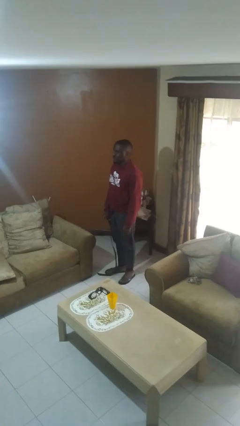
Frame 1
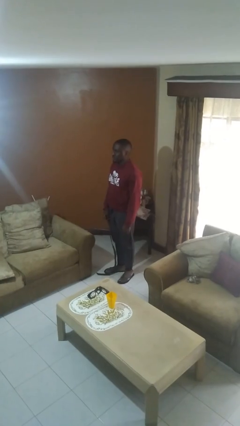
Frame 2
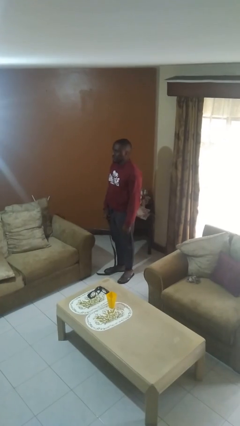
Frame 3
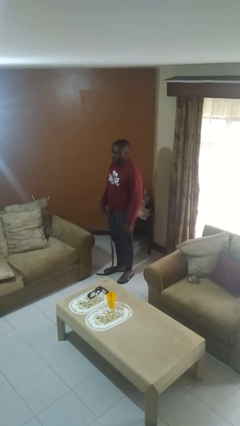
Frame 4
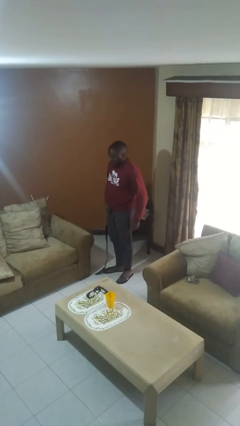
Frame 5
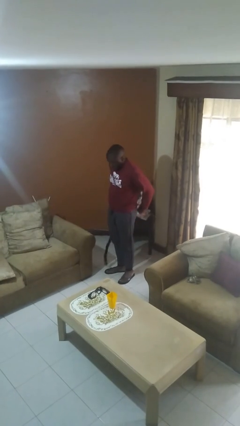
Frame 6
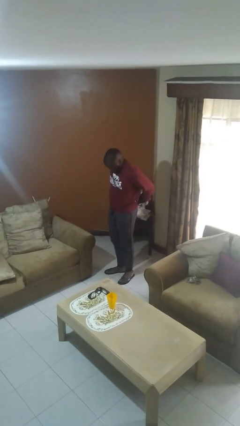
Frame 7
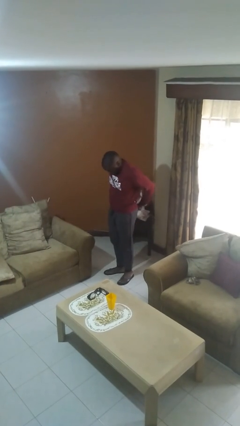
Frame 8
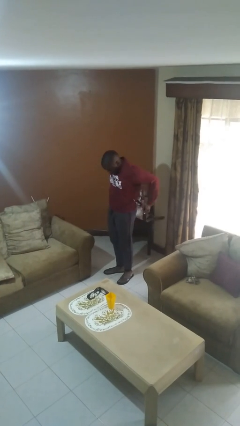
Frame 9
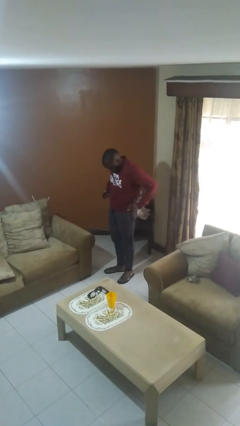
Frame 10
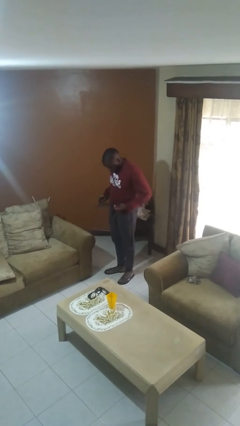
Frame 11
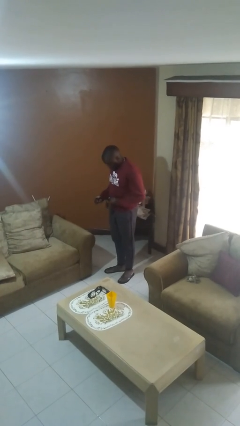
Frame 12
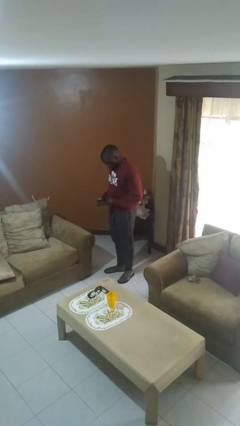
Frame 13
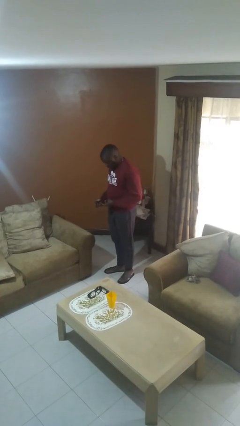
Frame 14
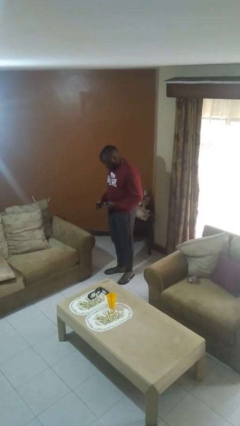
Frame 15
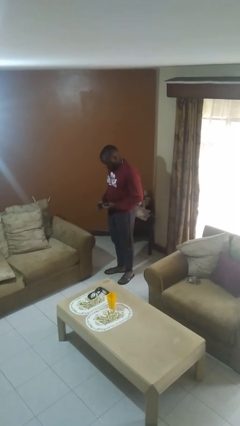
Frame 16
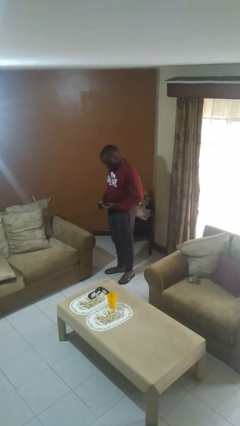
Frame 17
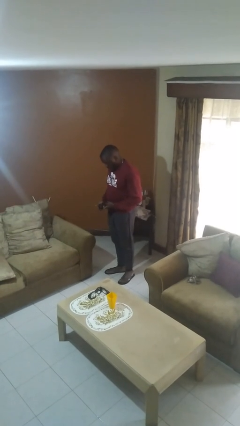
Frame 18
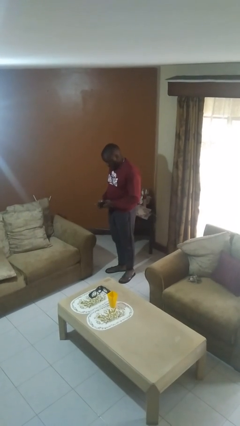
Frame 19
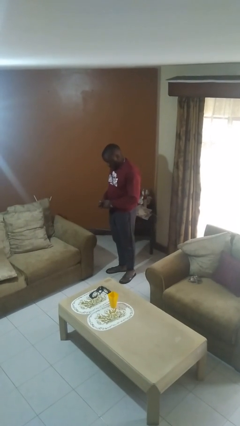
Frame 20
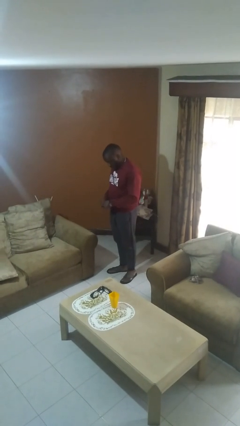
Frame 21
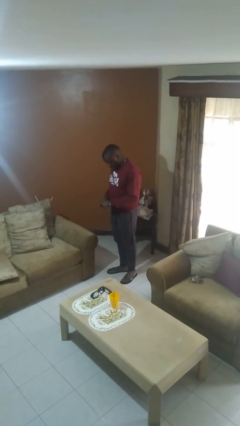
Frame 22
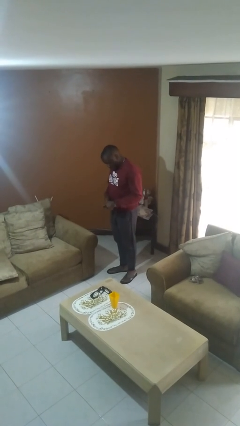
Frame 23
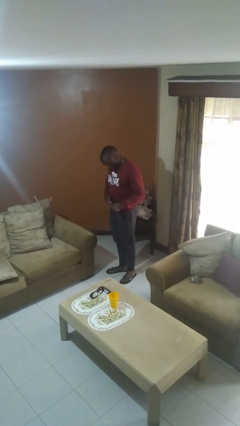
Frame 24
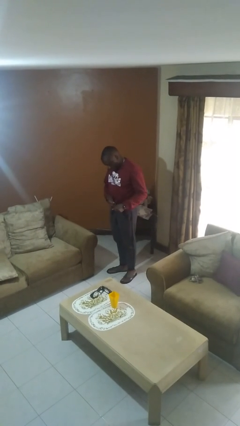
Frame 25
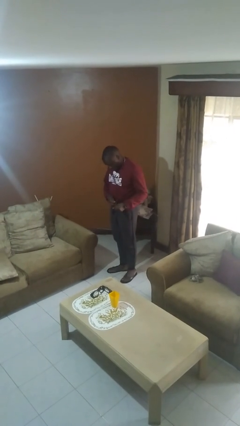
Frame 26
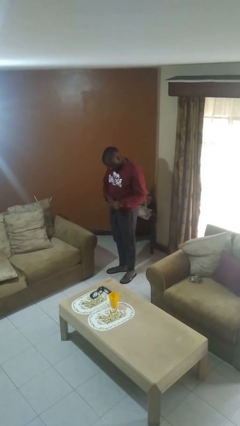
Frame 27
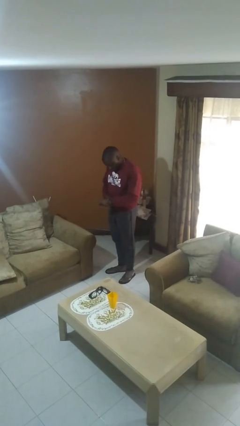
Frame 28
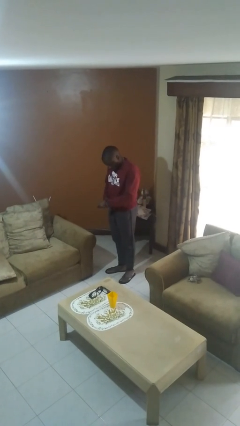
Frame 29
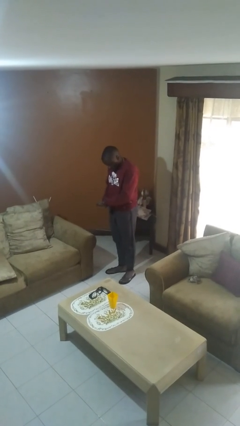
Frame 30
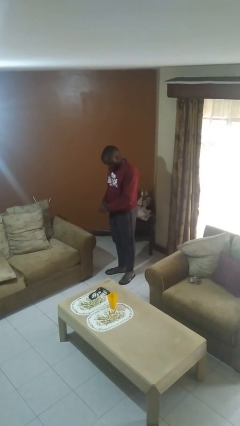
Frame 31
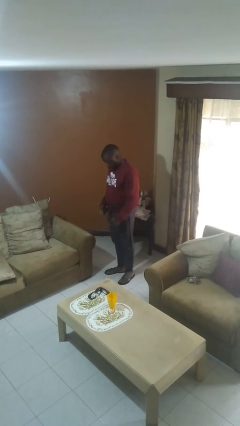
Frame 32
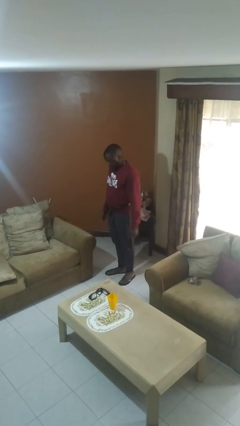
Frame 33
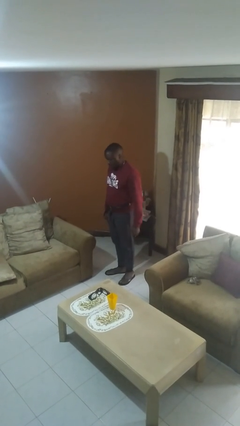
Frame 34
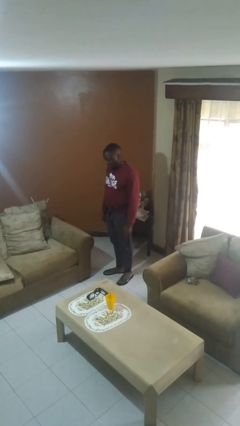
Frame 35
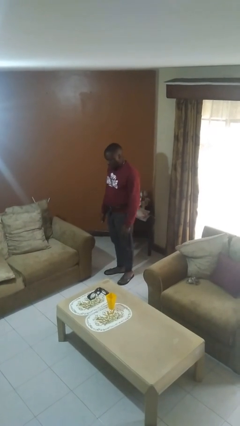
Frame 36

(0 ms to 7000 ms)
person puts on belt

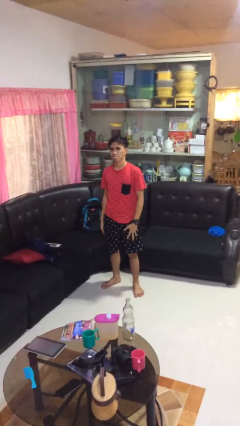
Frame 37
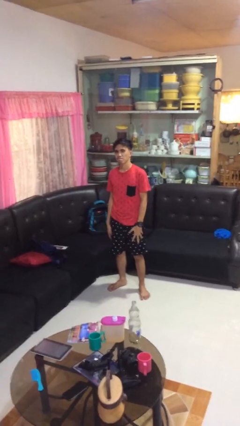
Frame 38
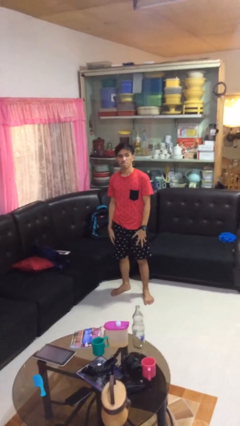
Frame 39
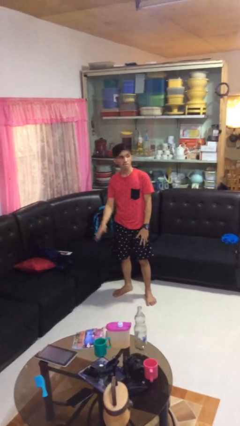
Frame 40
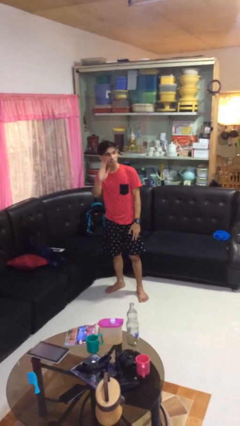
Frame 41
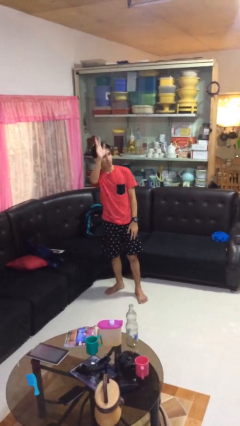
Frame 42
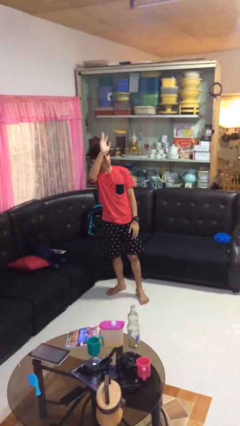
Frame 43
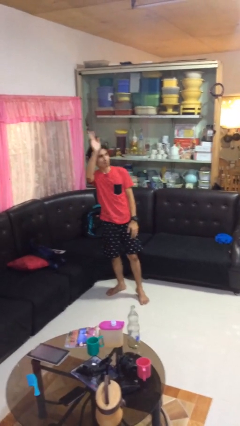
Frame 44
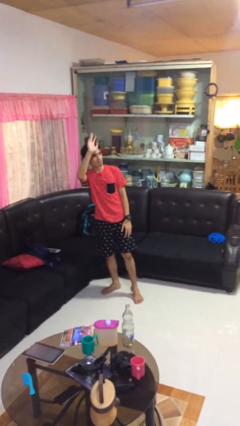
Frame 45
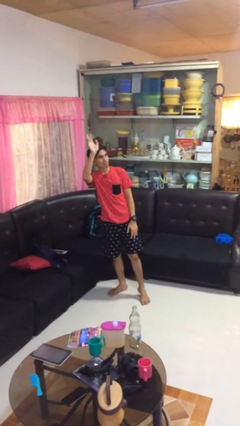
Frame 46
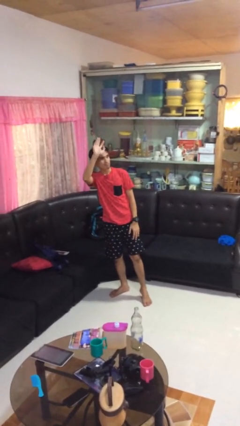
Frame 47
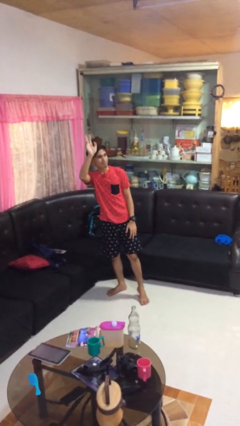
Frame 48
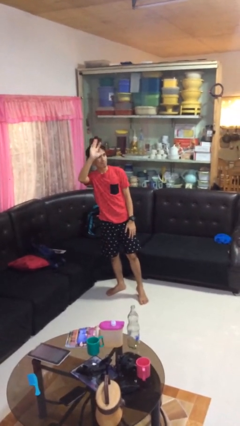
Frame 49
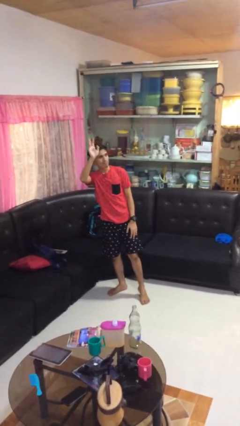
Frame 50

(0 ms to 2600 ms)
person waves at person

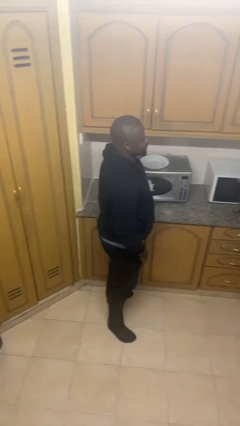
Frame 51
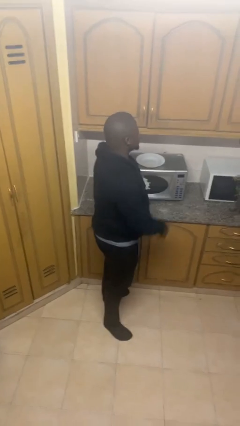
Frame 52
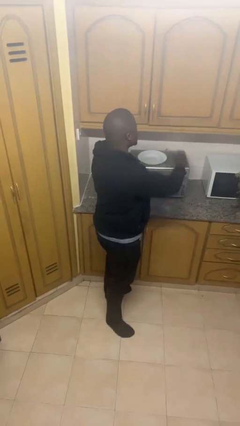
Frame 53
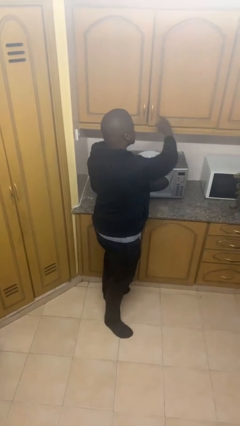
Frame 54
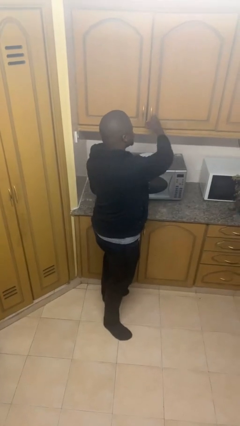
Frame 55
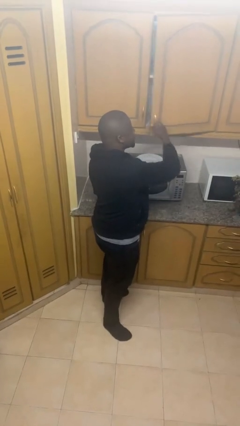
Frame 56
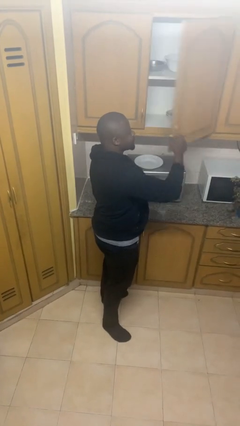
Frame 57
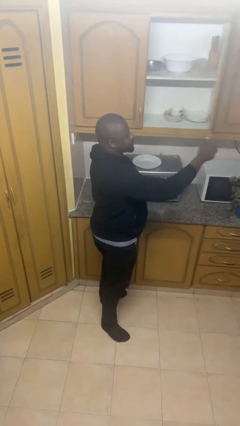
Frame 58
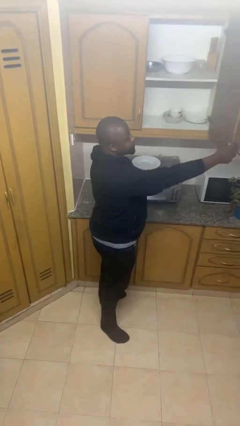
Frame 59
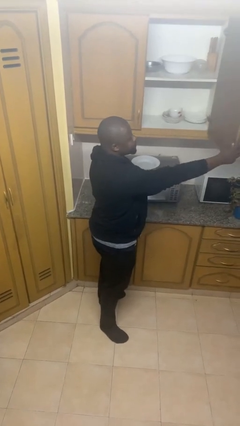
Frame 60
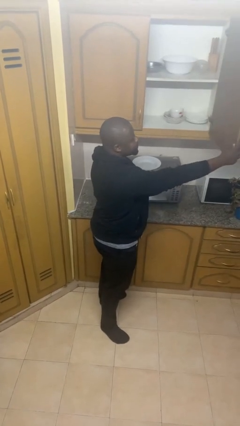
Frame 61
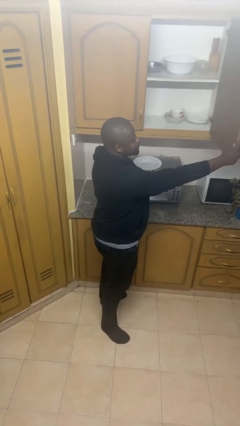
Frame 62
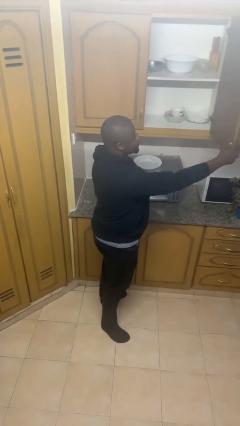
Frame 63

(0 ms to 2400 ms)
person opens cabinet

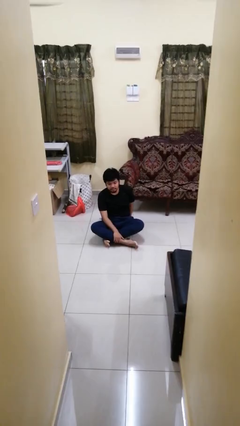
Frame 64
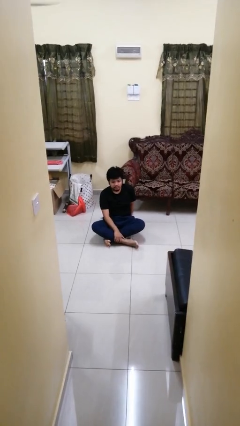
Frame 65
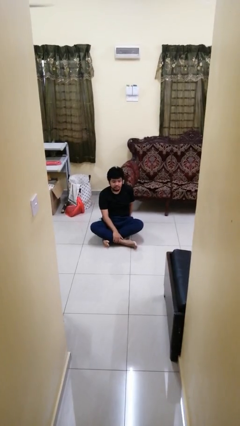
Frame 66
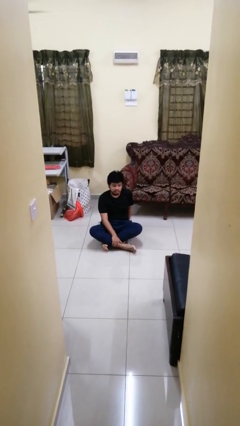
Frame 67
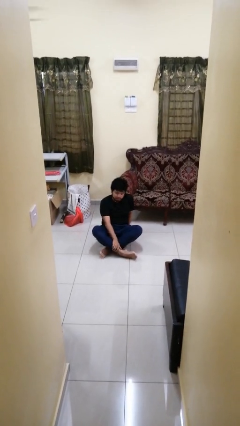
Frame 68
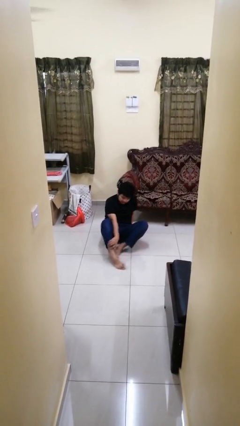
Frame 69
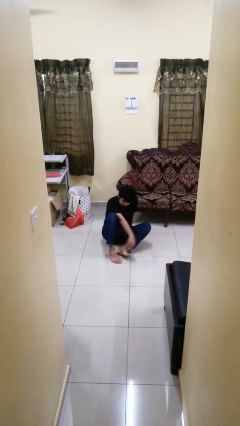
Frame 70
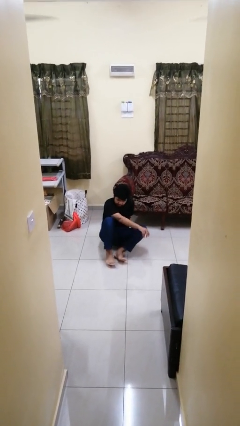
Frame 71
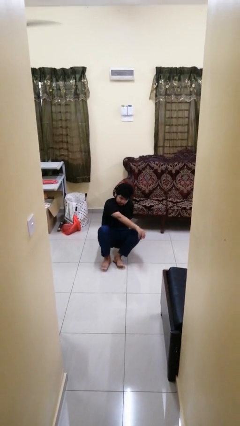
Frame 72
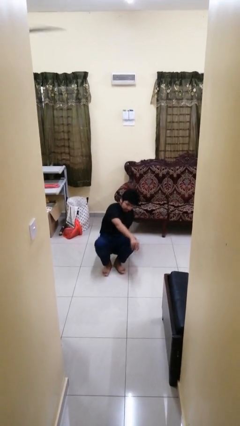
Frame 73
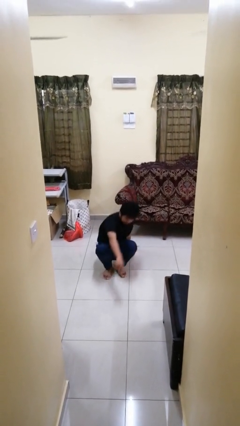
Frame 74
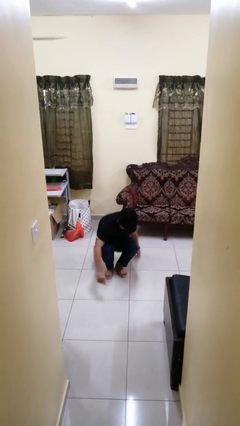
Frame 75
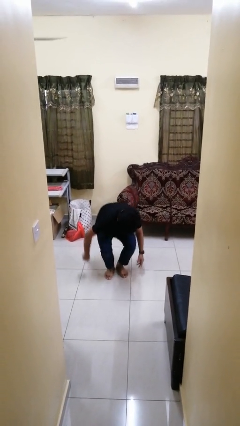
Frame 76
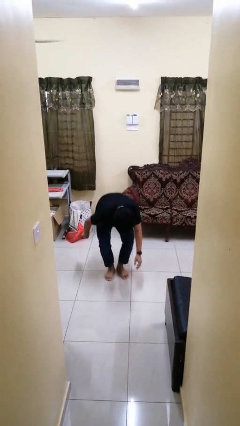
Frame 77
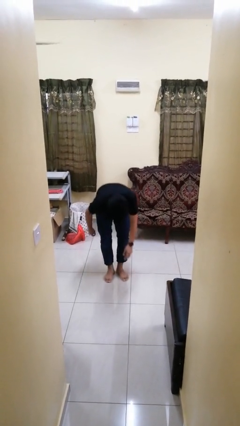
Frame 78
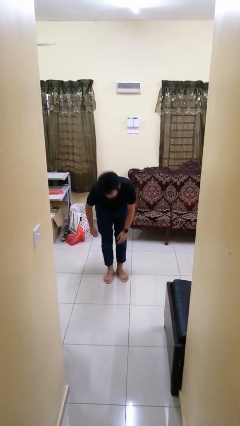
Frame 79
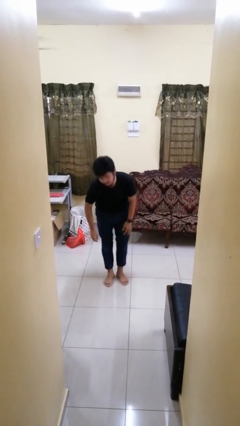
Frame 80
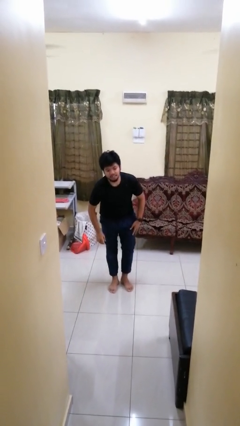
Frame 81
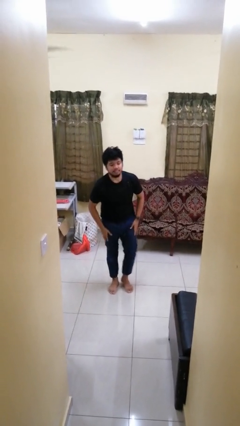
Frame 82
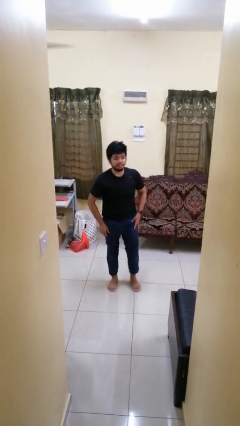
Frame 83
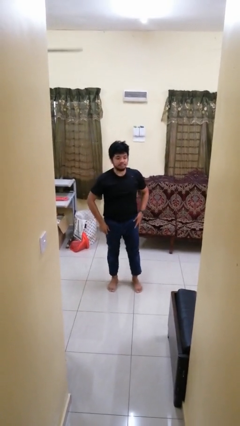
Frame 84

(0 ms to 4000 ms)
person stands up from floor

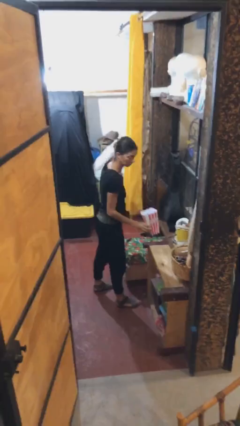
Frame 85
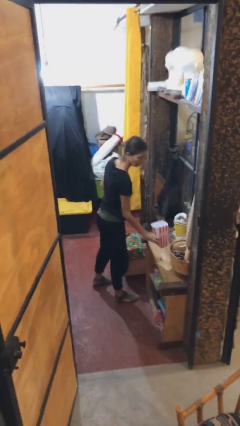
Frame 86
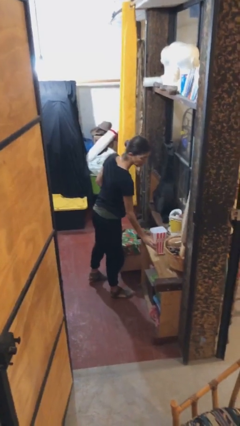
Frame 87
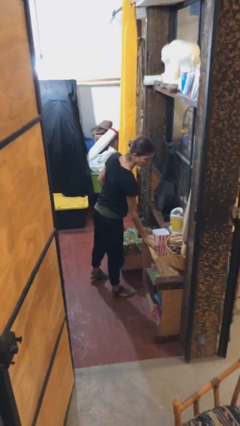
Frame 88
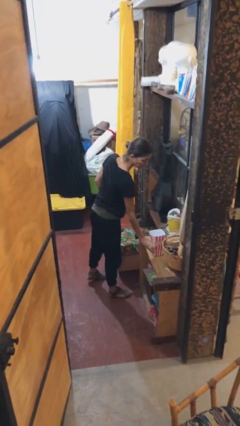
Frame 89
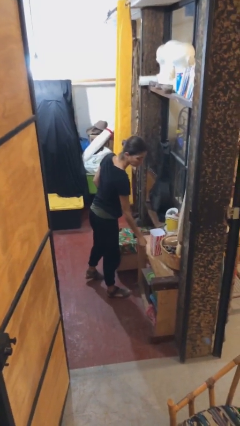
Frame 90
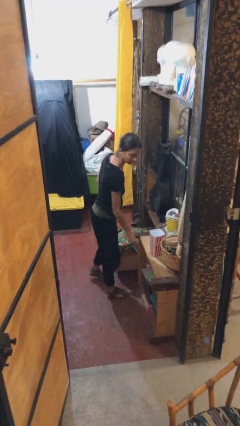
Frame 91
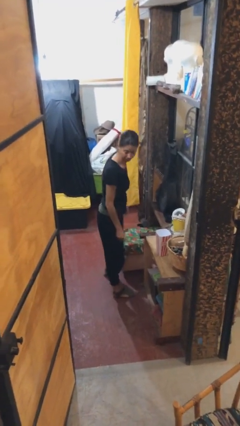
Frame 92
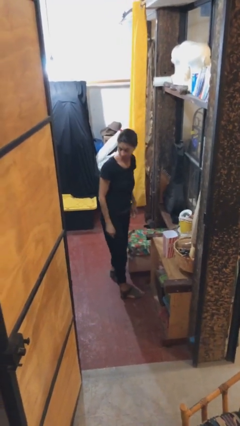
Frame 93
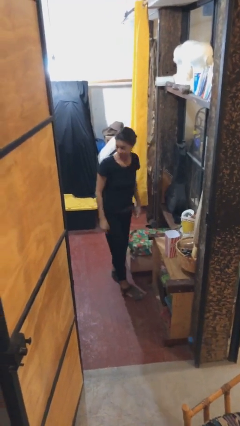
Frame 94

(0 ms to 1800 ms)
person puts down object on table
